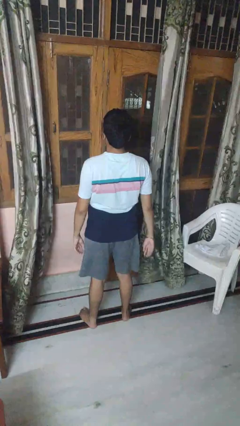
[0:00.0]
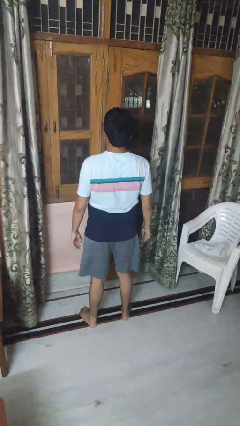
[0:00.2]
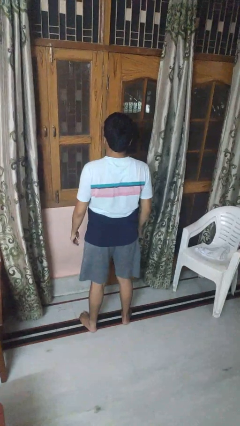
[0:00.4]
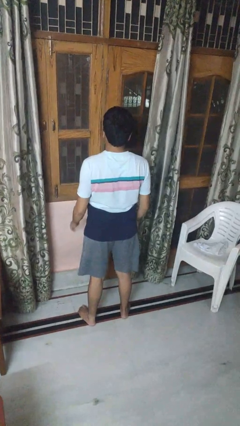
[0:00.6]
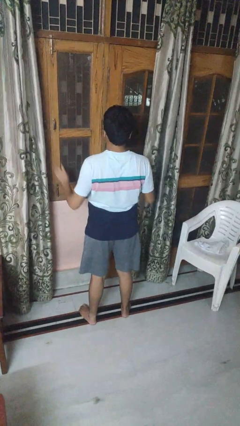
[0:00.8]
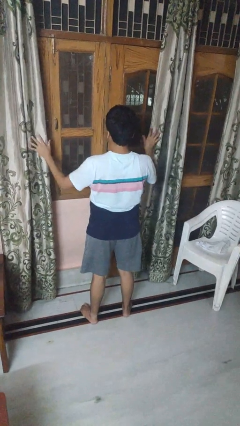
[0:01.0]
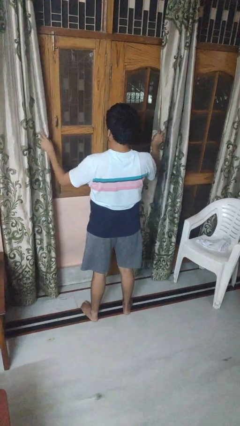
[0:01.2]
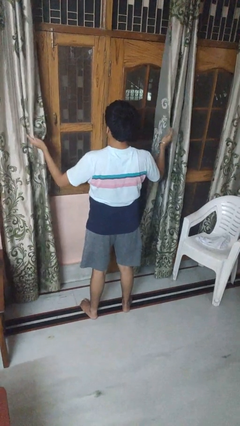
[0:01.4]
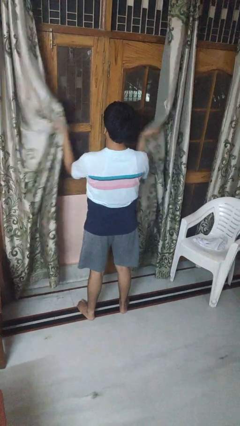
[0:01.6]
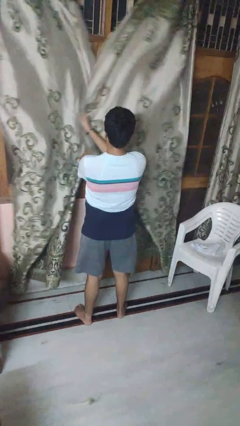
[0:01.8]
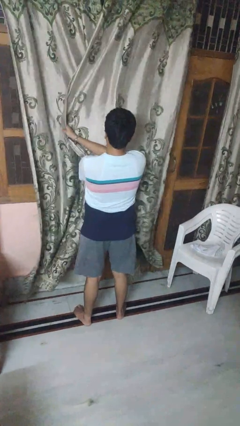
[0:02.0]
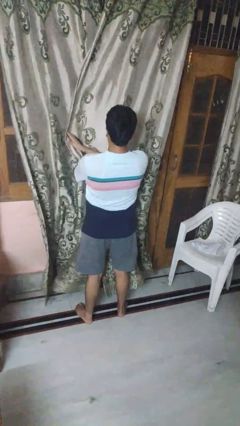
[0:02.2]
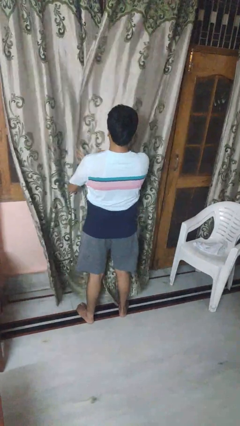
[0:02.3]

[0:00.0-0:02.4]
person closes curtains

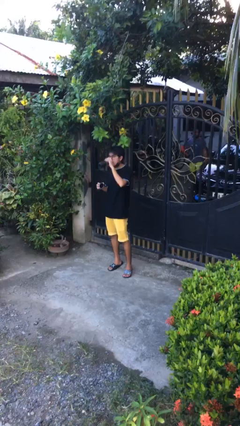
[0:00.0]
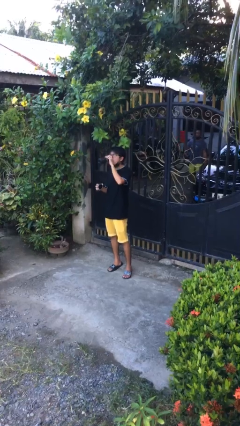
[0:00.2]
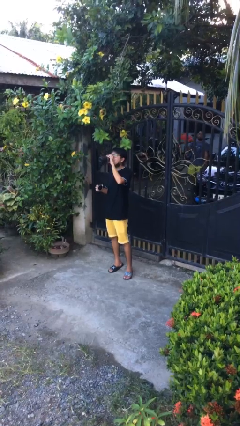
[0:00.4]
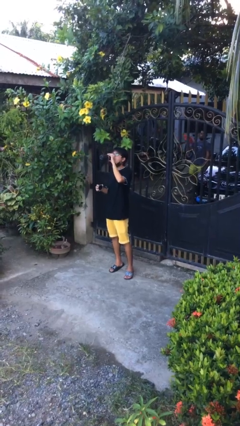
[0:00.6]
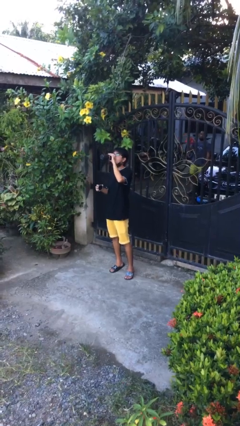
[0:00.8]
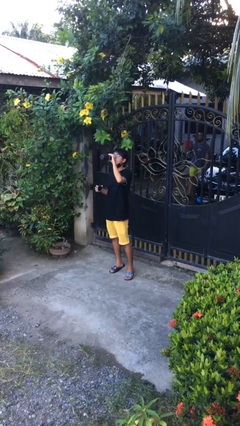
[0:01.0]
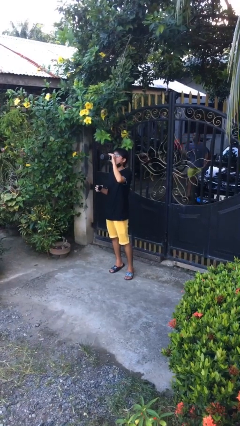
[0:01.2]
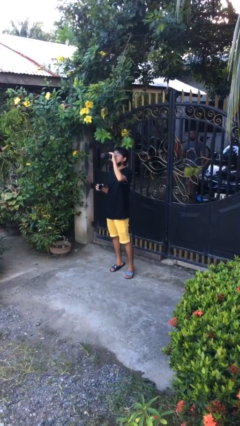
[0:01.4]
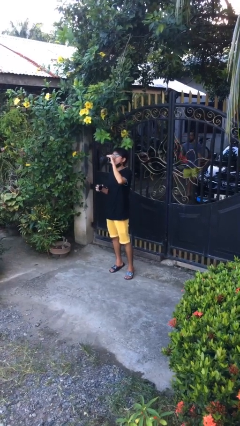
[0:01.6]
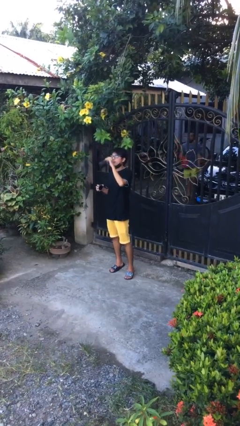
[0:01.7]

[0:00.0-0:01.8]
person drinks from bottle

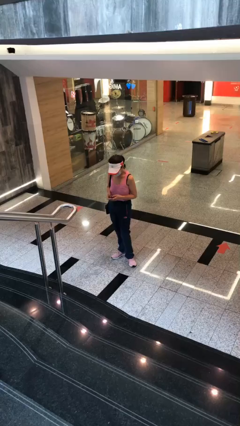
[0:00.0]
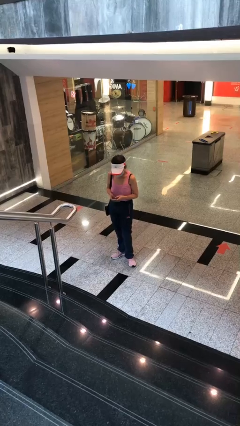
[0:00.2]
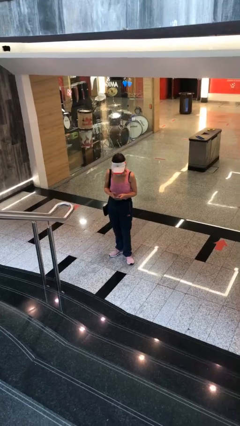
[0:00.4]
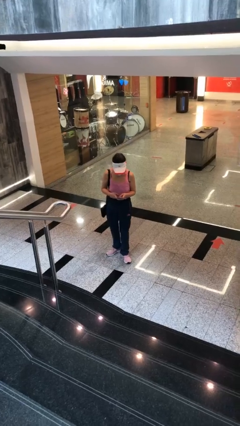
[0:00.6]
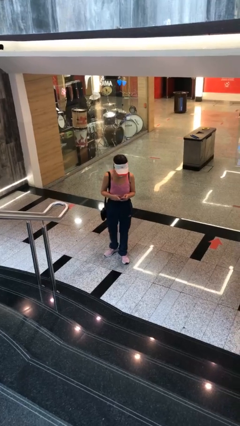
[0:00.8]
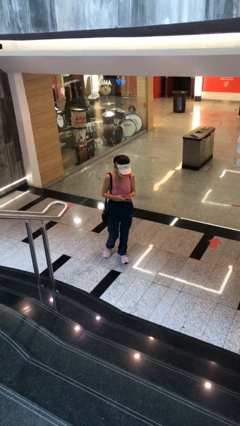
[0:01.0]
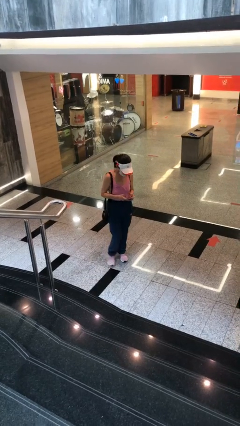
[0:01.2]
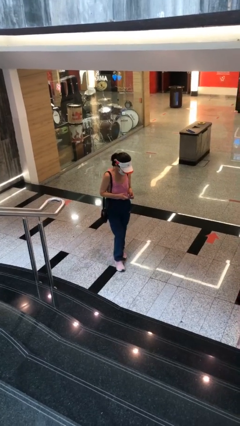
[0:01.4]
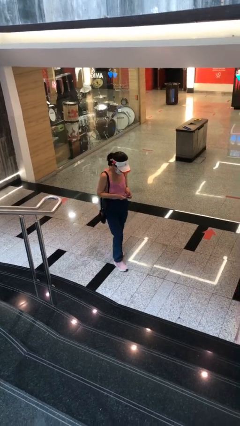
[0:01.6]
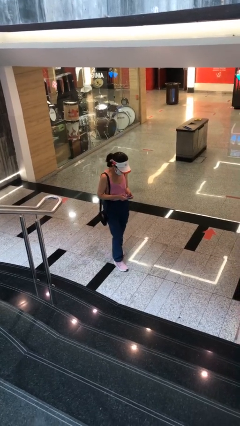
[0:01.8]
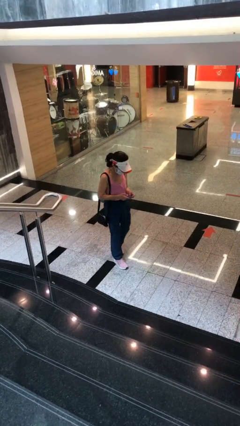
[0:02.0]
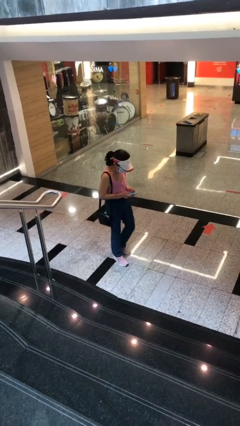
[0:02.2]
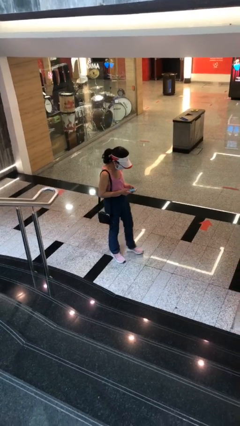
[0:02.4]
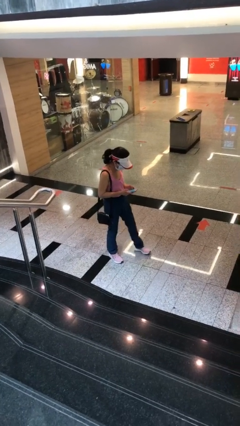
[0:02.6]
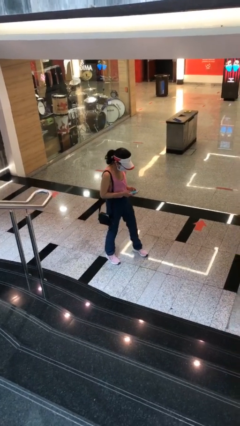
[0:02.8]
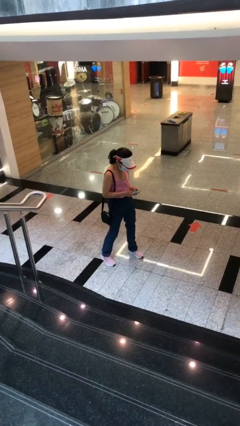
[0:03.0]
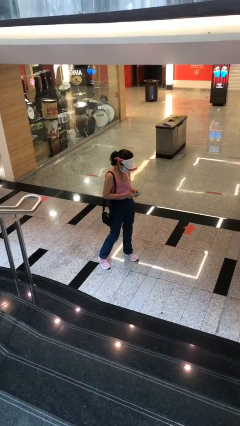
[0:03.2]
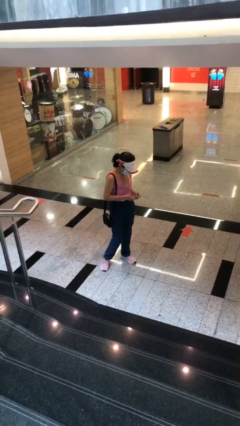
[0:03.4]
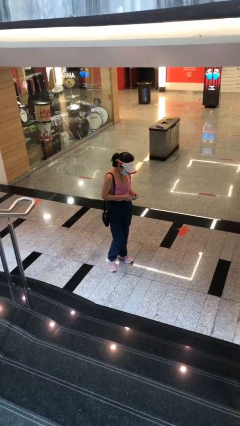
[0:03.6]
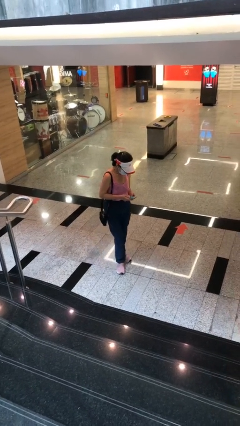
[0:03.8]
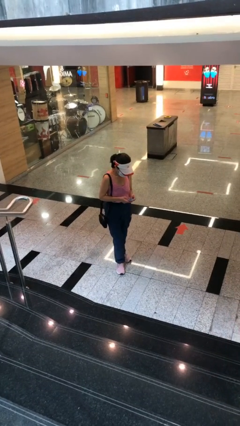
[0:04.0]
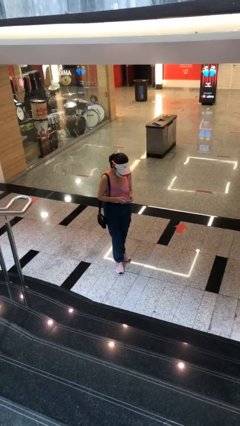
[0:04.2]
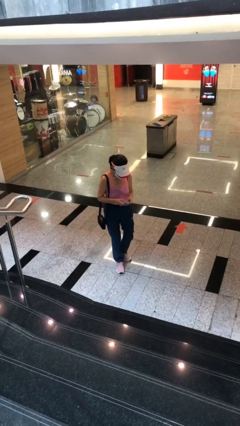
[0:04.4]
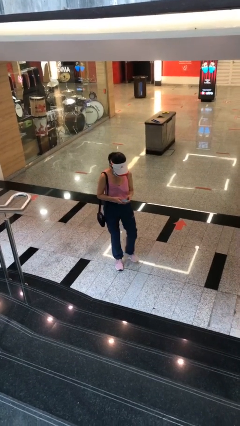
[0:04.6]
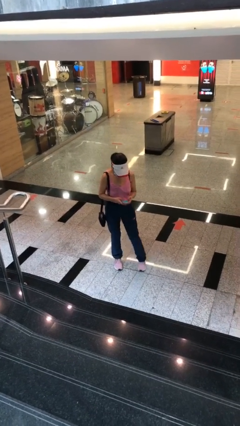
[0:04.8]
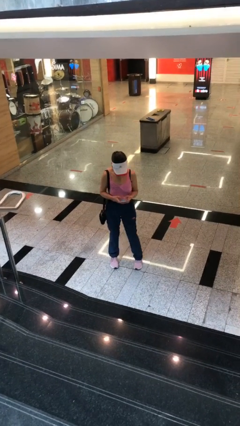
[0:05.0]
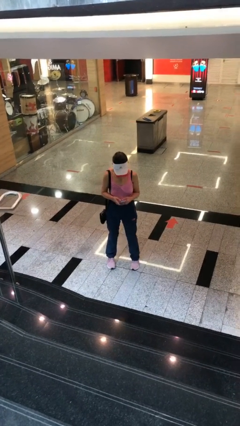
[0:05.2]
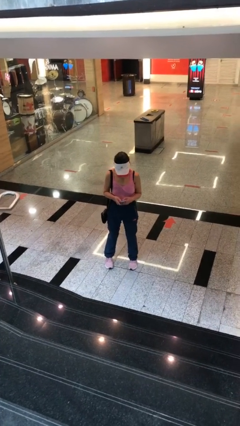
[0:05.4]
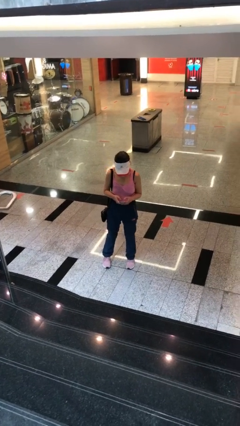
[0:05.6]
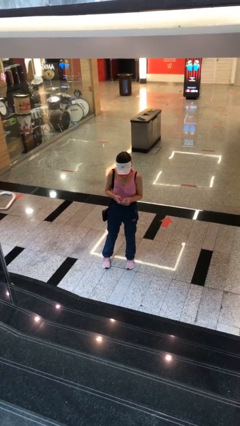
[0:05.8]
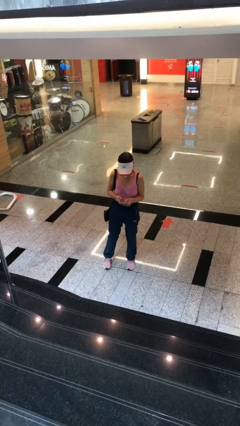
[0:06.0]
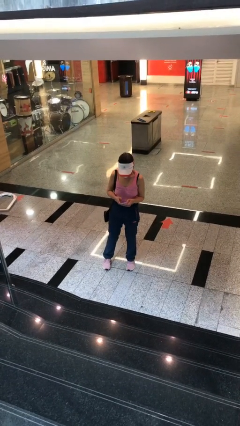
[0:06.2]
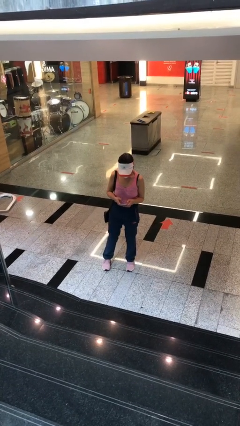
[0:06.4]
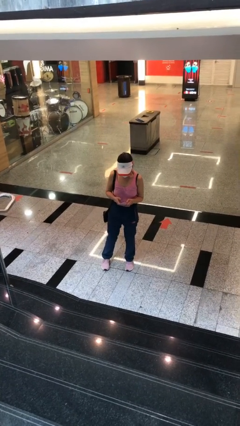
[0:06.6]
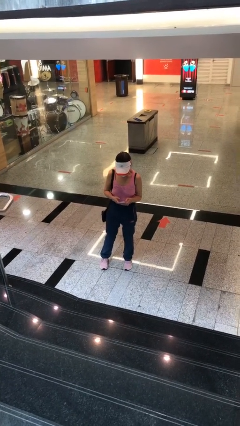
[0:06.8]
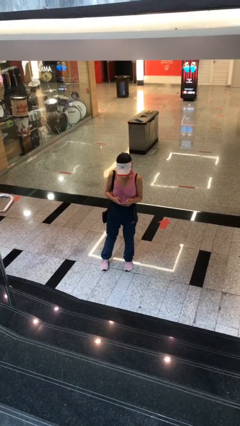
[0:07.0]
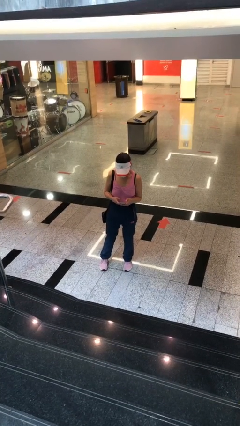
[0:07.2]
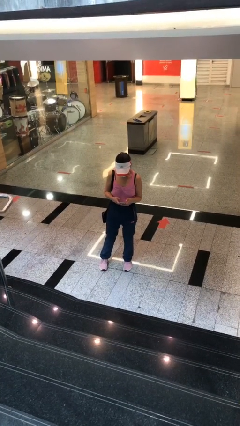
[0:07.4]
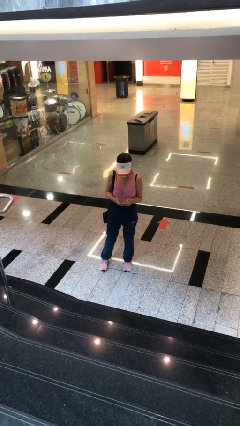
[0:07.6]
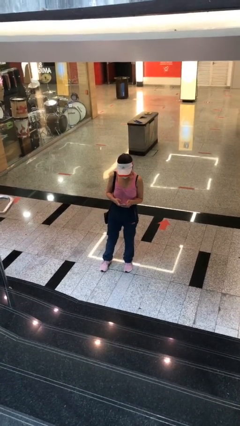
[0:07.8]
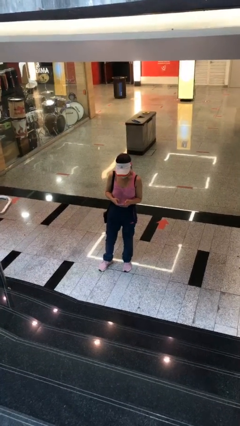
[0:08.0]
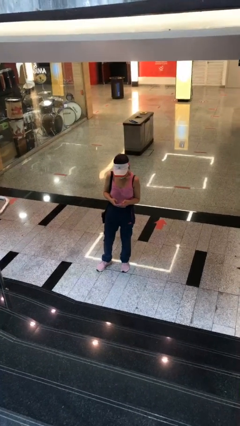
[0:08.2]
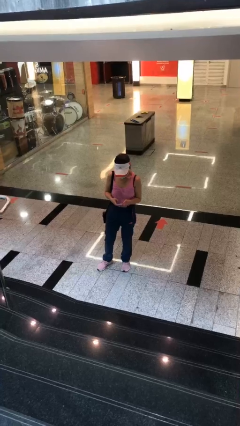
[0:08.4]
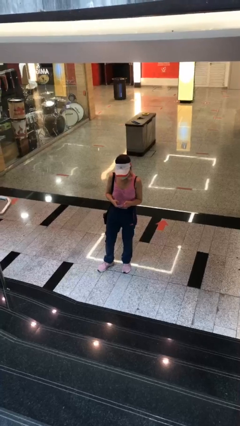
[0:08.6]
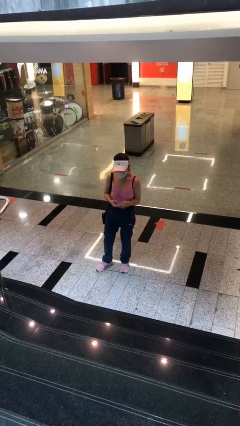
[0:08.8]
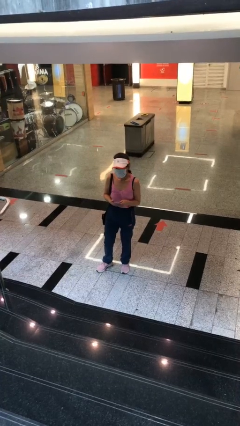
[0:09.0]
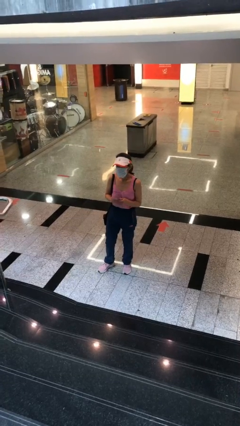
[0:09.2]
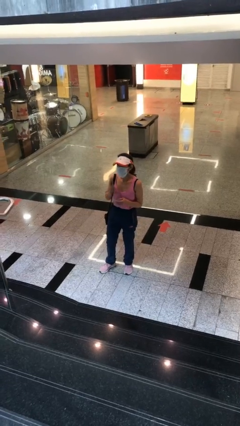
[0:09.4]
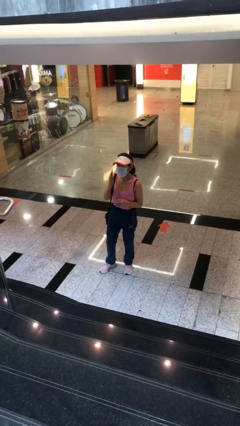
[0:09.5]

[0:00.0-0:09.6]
person texts on phone

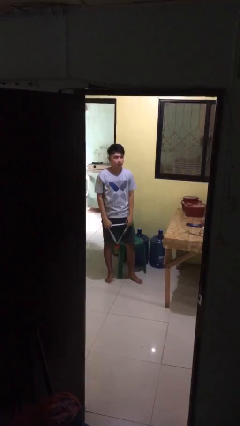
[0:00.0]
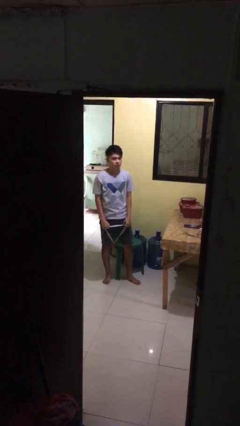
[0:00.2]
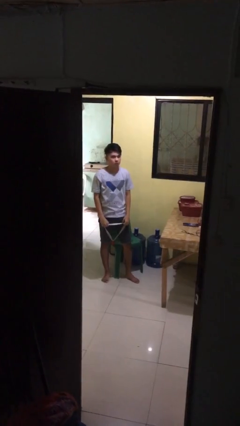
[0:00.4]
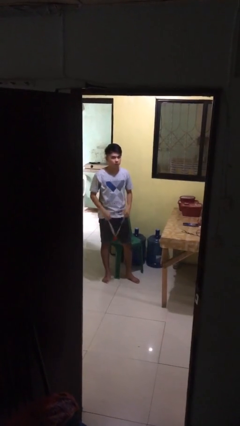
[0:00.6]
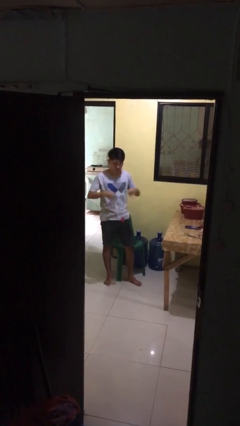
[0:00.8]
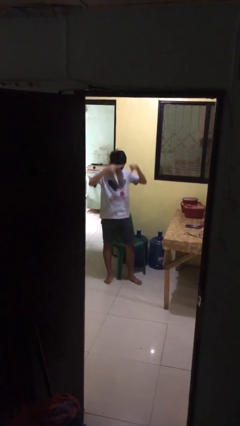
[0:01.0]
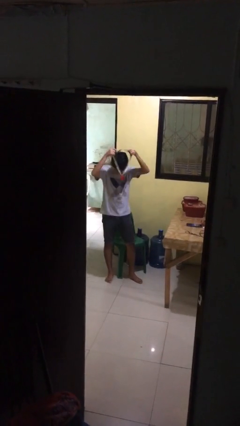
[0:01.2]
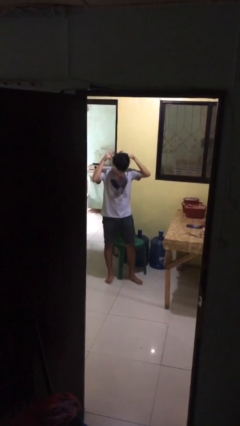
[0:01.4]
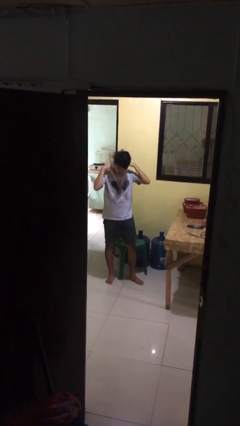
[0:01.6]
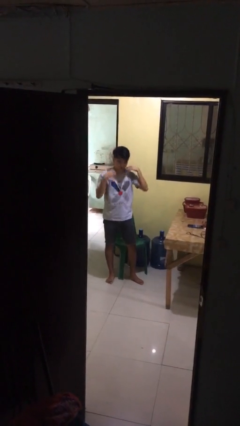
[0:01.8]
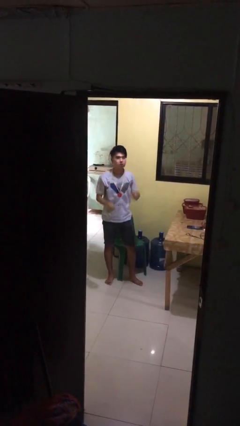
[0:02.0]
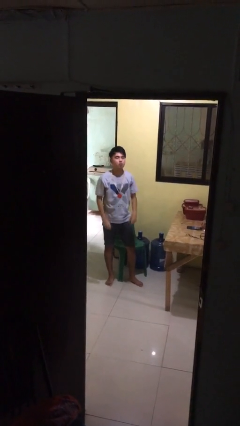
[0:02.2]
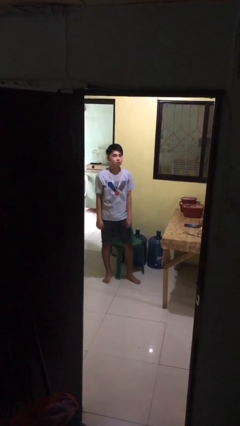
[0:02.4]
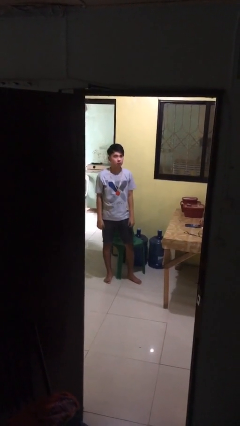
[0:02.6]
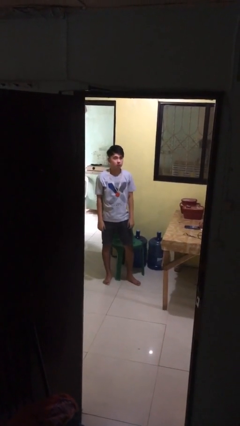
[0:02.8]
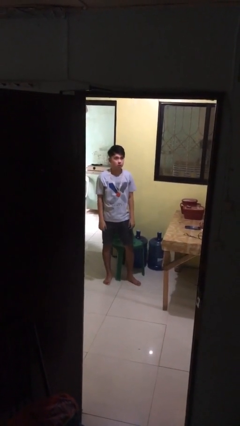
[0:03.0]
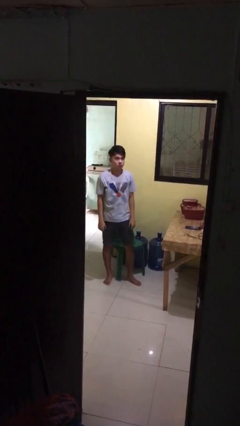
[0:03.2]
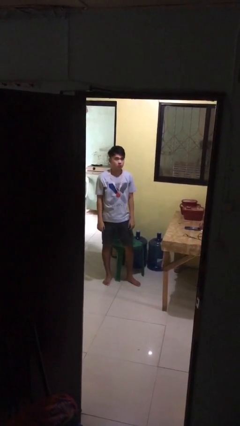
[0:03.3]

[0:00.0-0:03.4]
person puts on necklace

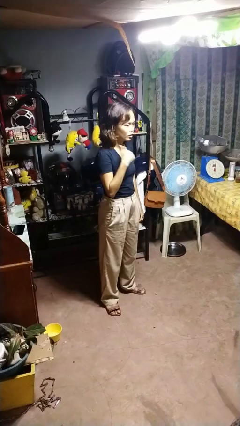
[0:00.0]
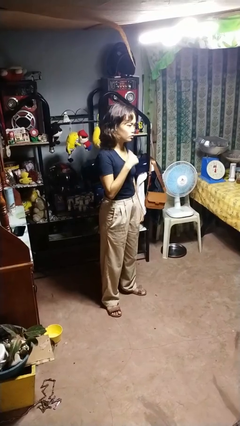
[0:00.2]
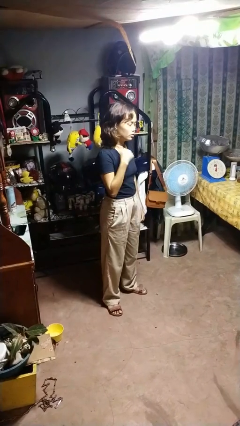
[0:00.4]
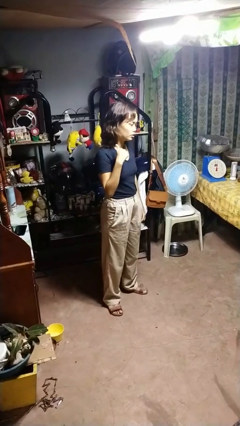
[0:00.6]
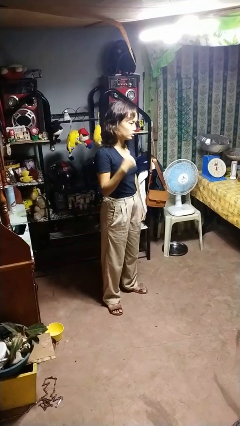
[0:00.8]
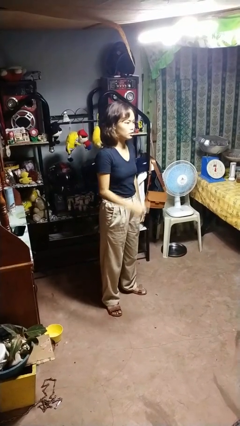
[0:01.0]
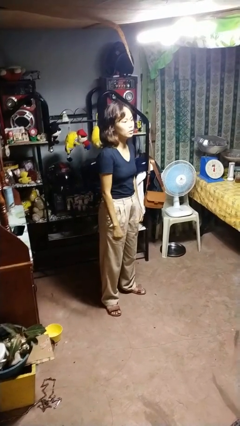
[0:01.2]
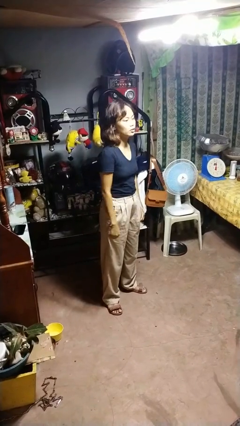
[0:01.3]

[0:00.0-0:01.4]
person gestures cut
